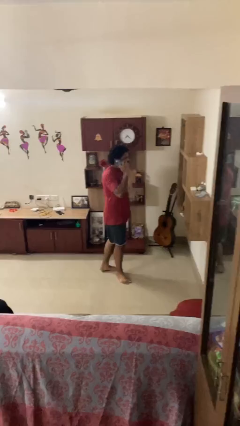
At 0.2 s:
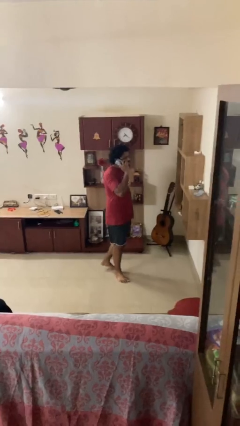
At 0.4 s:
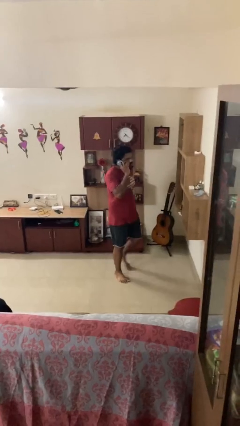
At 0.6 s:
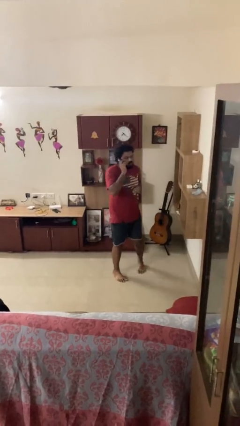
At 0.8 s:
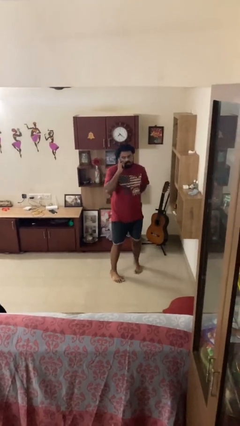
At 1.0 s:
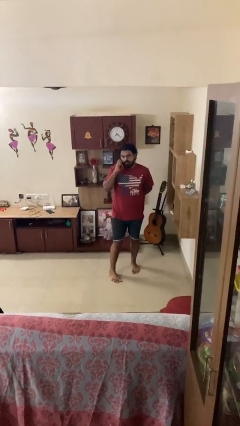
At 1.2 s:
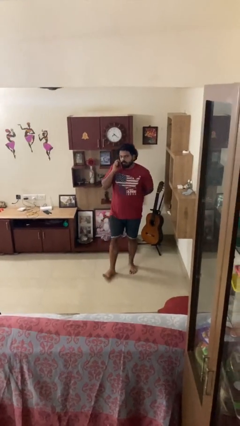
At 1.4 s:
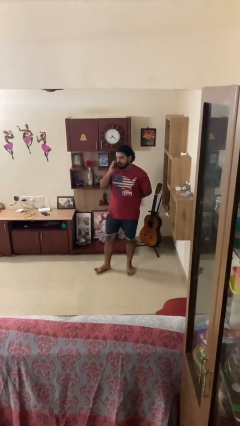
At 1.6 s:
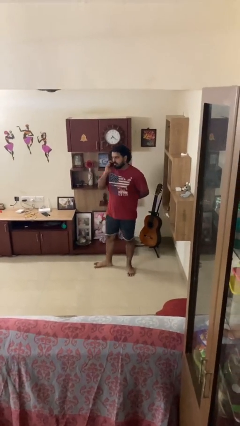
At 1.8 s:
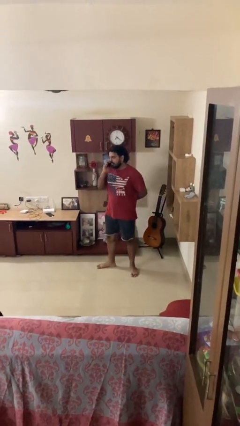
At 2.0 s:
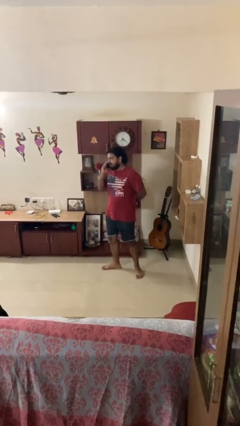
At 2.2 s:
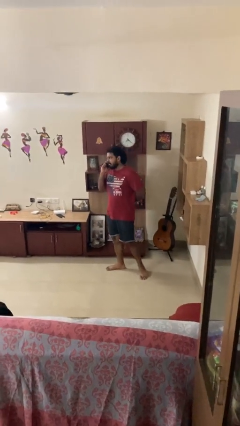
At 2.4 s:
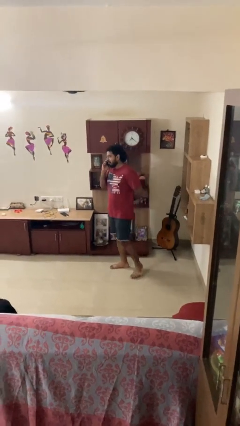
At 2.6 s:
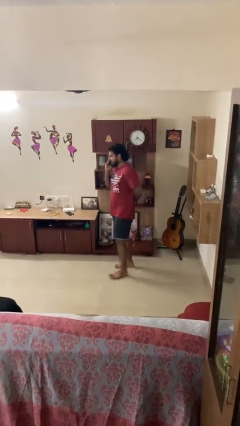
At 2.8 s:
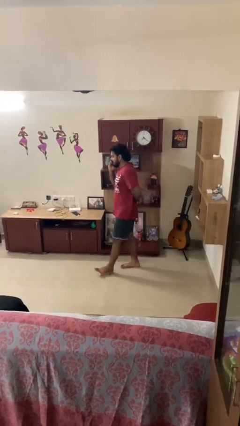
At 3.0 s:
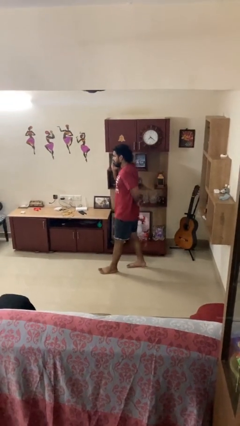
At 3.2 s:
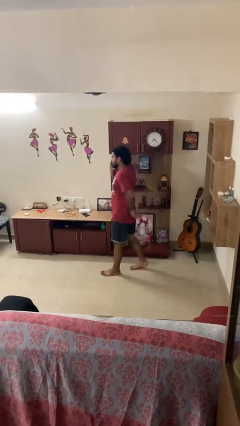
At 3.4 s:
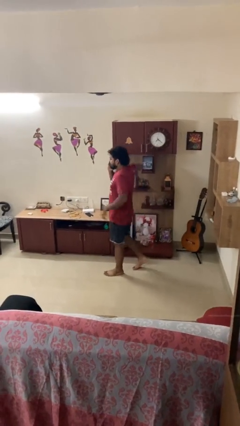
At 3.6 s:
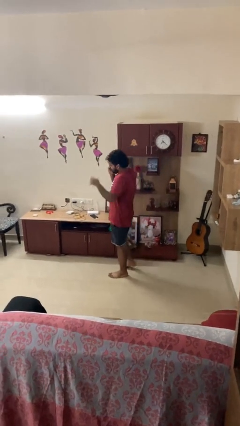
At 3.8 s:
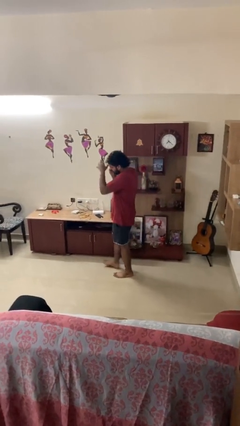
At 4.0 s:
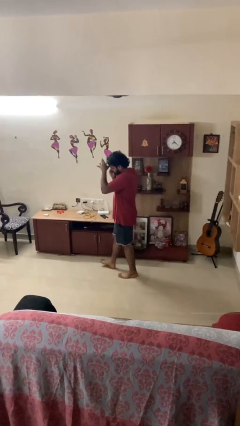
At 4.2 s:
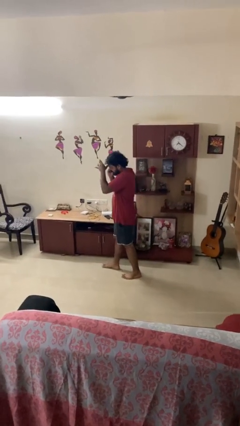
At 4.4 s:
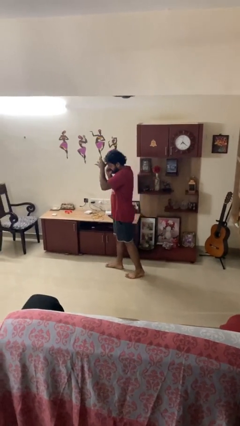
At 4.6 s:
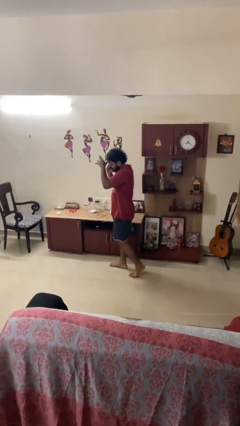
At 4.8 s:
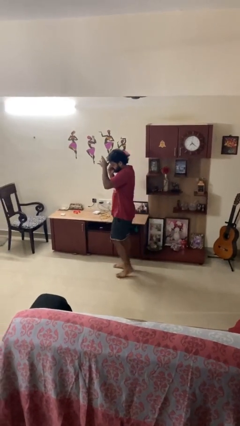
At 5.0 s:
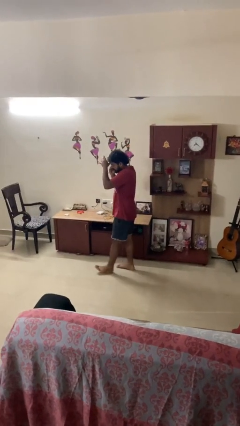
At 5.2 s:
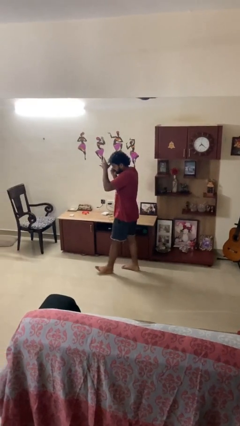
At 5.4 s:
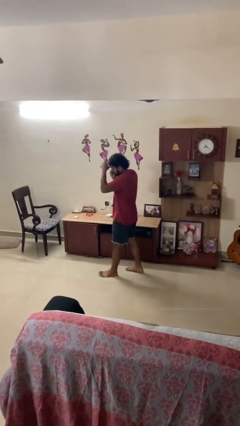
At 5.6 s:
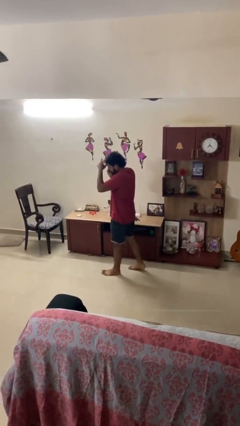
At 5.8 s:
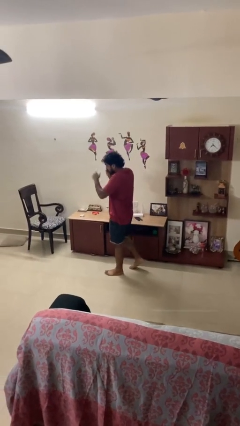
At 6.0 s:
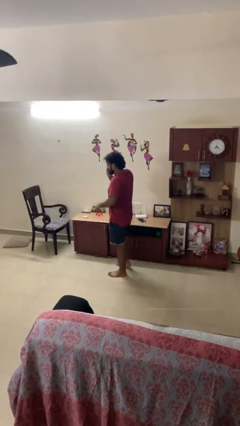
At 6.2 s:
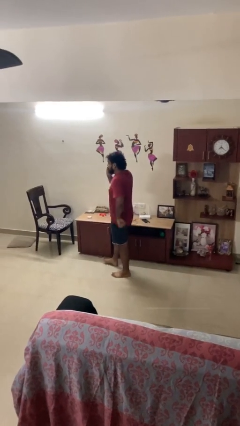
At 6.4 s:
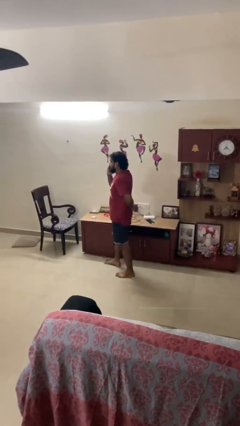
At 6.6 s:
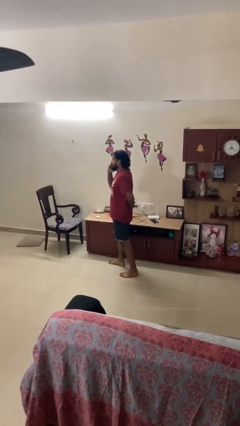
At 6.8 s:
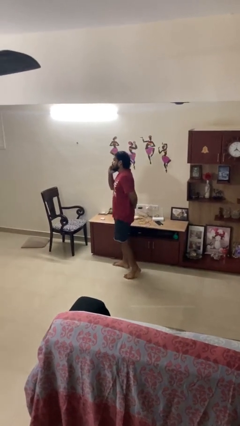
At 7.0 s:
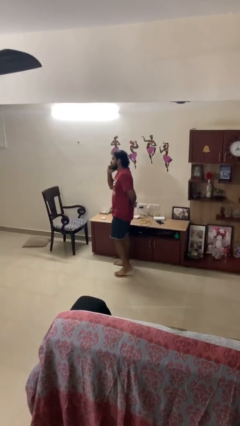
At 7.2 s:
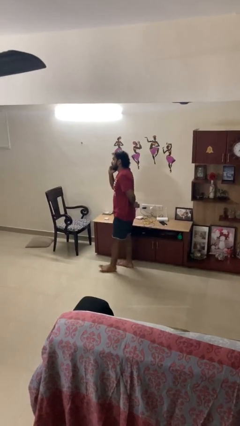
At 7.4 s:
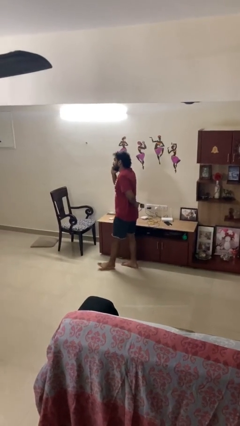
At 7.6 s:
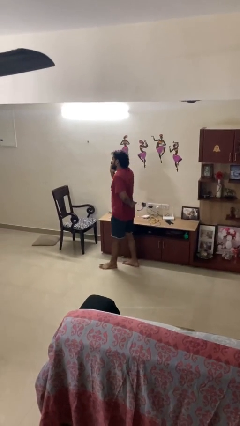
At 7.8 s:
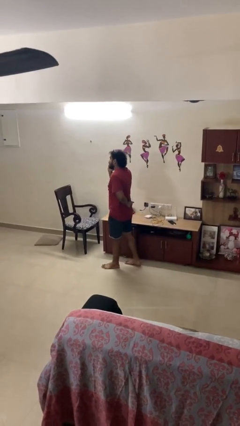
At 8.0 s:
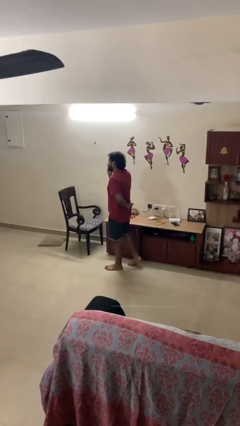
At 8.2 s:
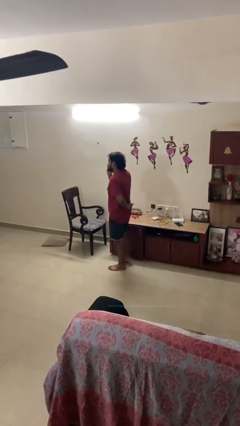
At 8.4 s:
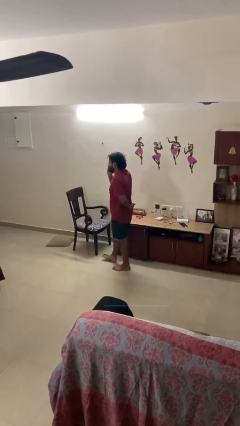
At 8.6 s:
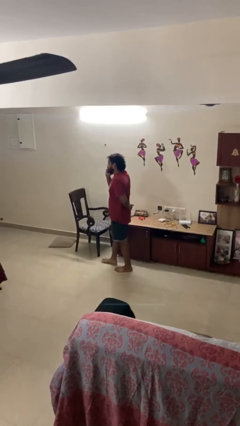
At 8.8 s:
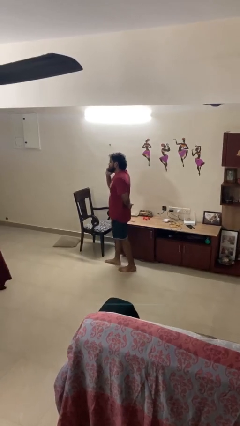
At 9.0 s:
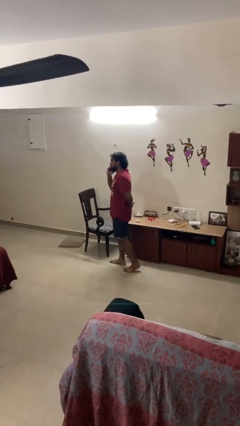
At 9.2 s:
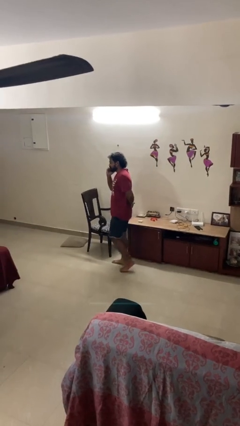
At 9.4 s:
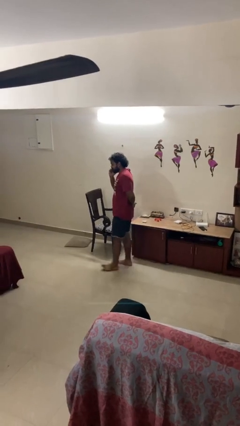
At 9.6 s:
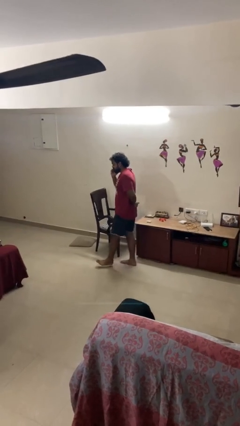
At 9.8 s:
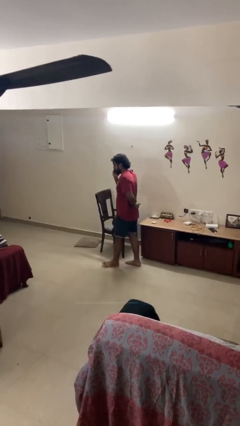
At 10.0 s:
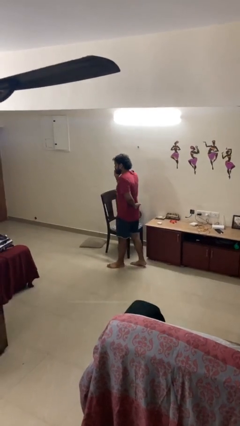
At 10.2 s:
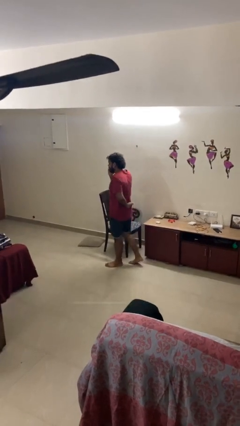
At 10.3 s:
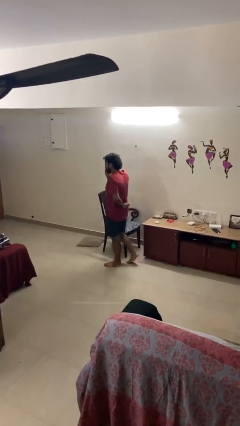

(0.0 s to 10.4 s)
person talks on phone

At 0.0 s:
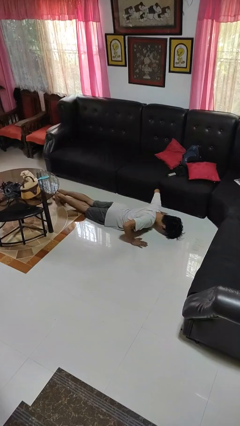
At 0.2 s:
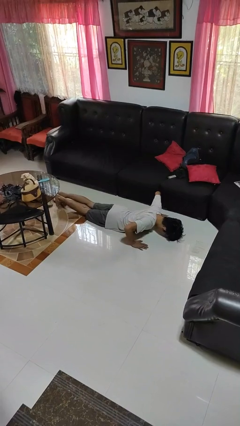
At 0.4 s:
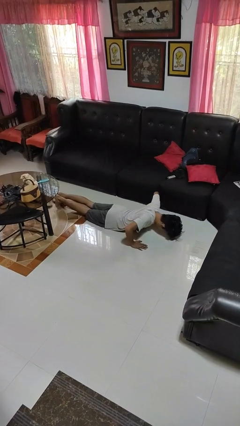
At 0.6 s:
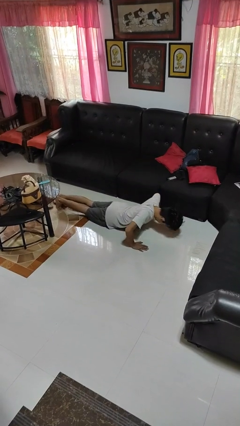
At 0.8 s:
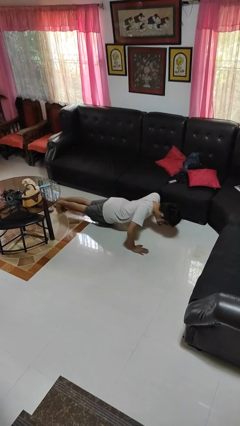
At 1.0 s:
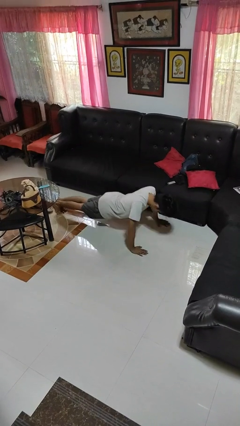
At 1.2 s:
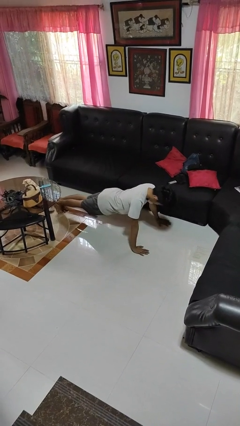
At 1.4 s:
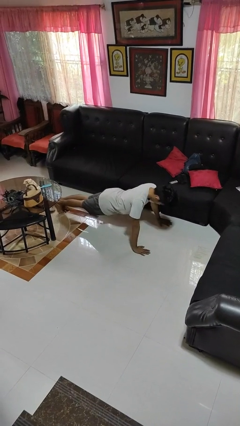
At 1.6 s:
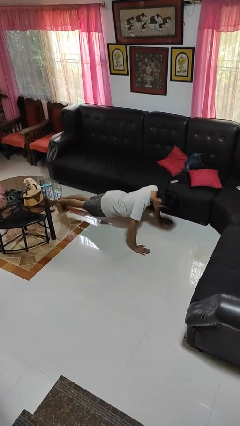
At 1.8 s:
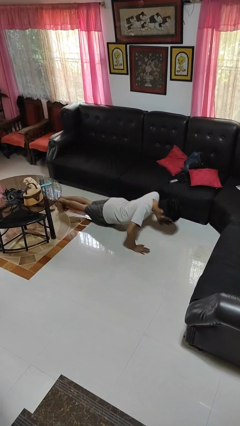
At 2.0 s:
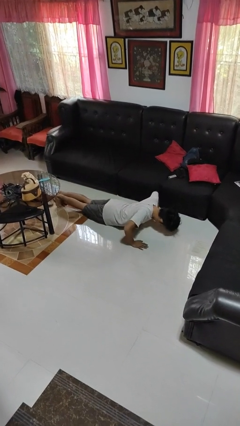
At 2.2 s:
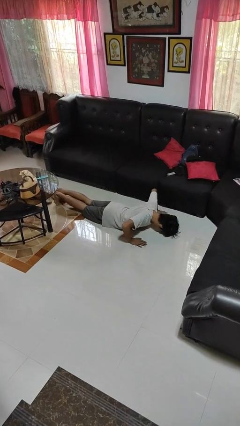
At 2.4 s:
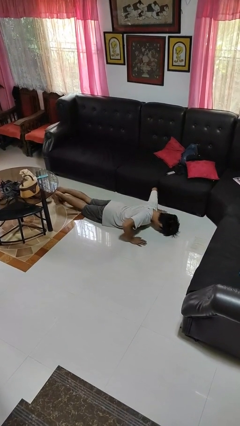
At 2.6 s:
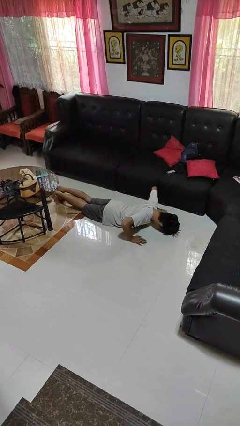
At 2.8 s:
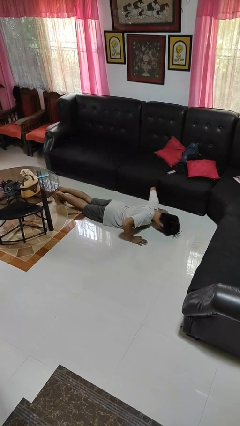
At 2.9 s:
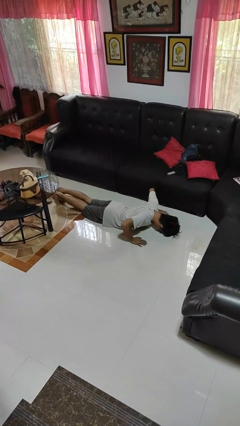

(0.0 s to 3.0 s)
person exercises with pushup

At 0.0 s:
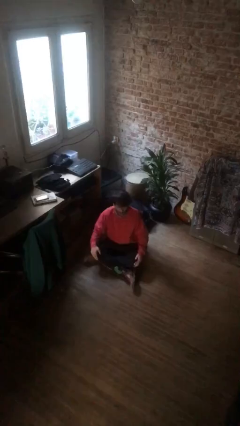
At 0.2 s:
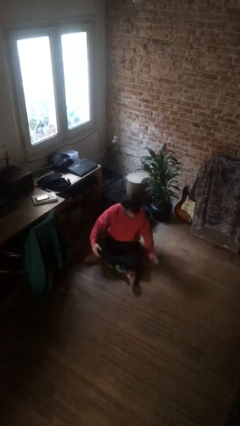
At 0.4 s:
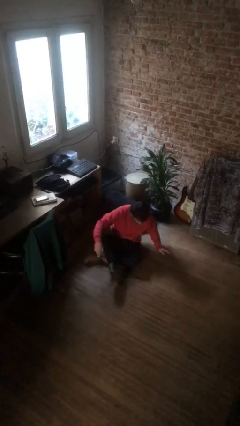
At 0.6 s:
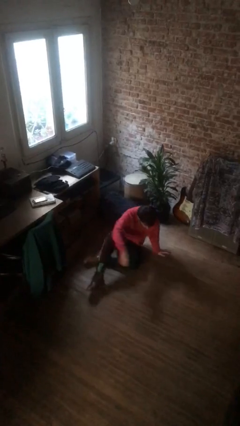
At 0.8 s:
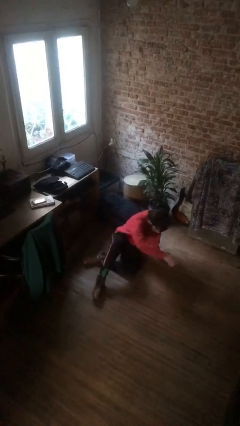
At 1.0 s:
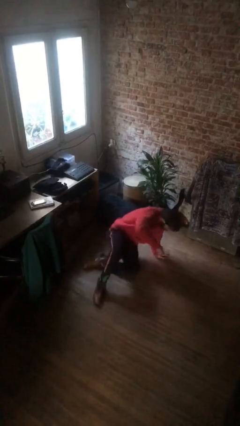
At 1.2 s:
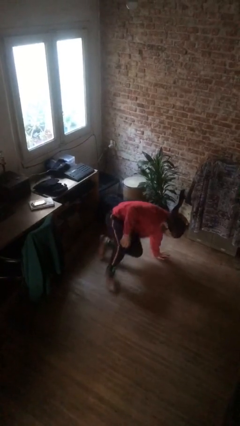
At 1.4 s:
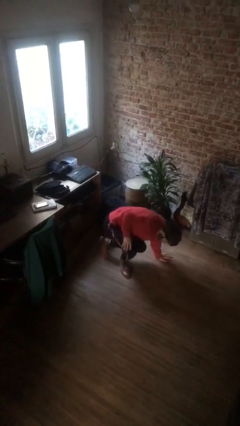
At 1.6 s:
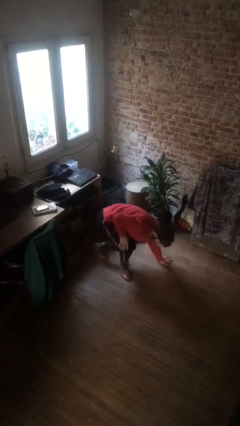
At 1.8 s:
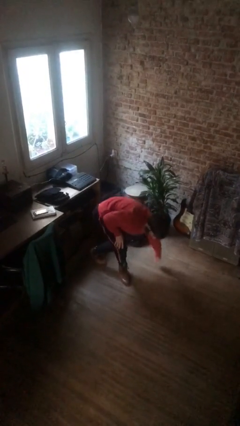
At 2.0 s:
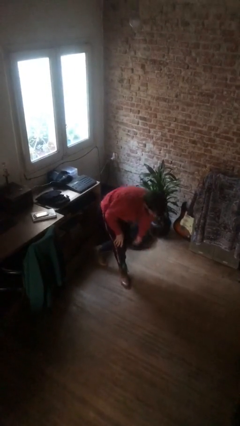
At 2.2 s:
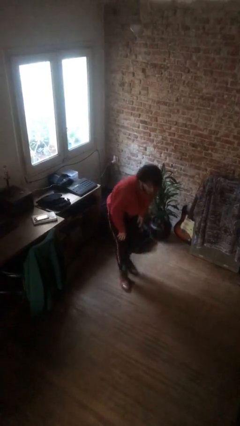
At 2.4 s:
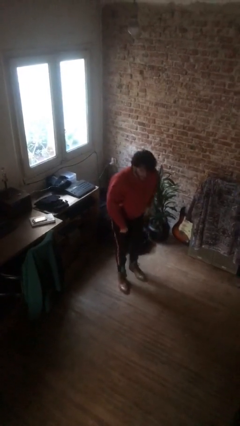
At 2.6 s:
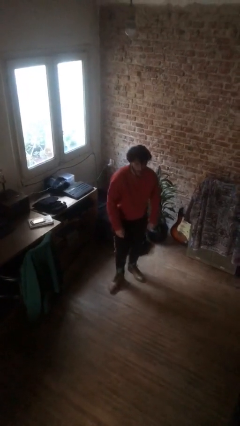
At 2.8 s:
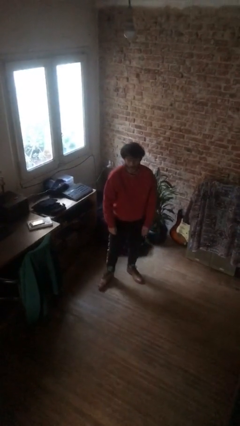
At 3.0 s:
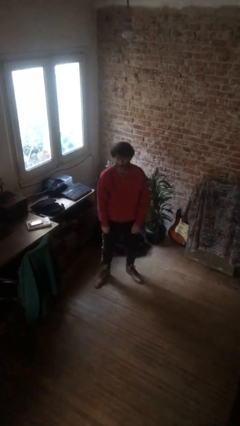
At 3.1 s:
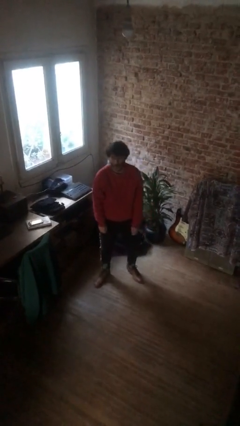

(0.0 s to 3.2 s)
person stands up from floor

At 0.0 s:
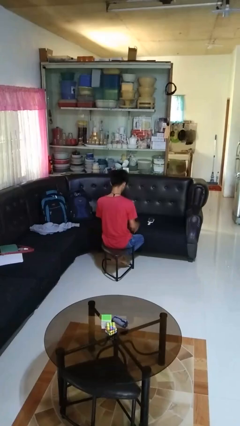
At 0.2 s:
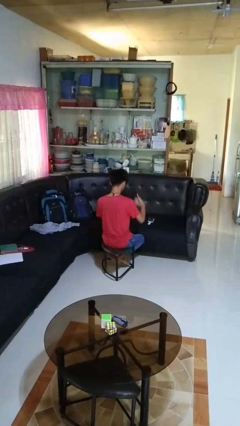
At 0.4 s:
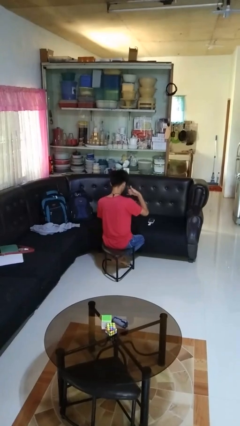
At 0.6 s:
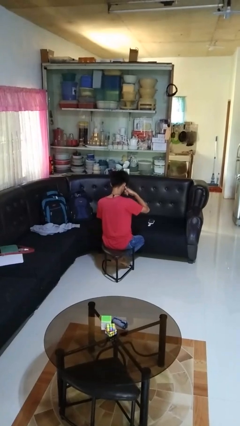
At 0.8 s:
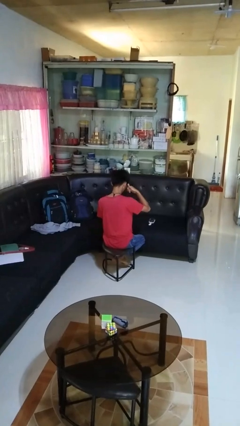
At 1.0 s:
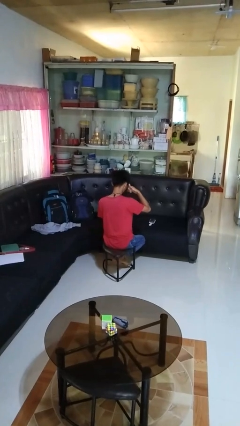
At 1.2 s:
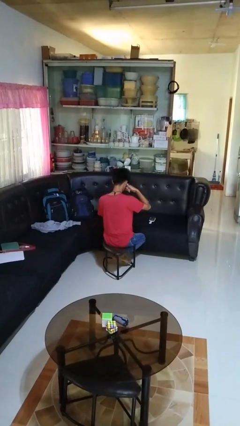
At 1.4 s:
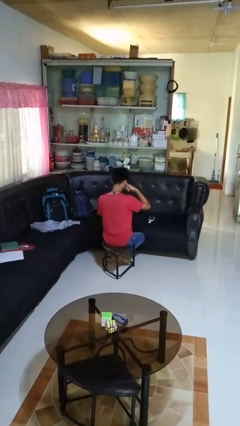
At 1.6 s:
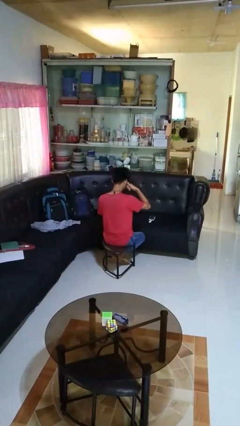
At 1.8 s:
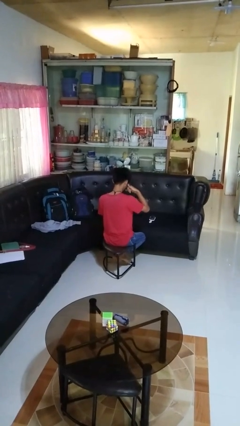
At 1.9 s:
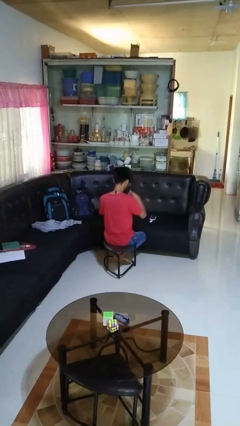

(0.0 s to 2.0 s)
person gestures call me
